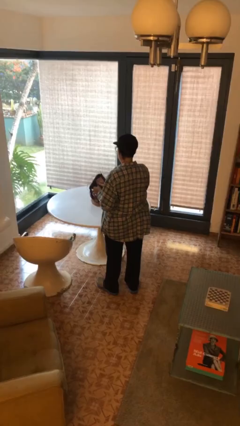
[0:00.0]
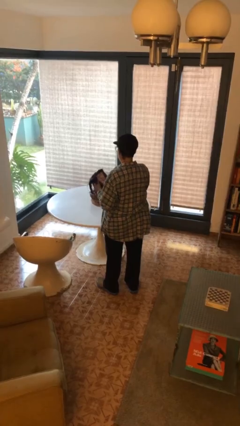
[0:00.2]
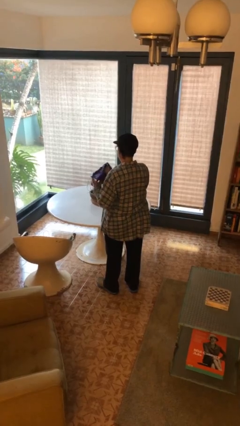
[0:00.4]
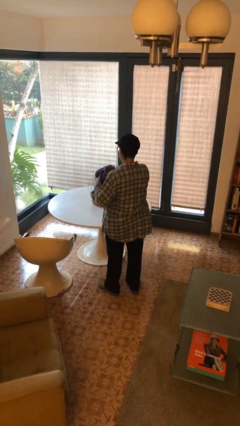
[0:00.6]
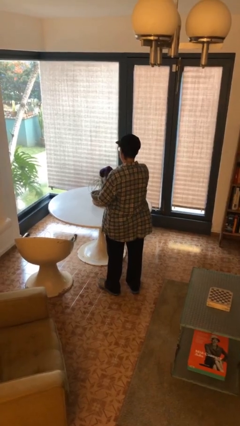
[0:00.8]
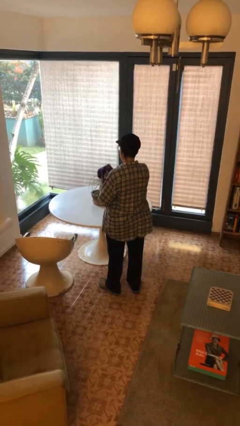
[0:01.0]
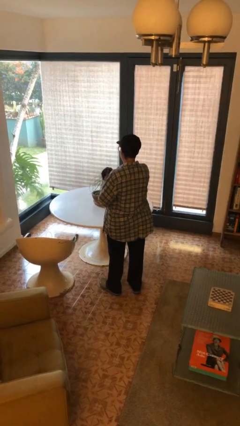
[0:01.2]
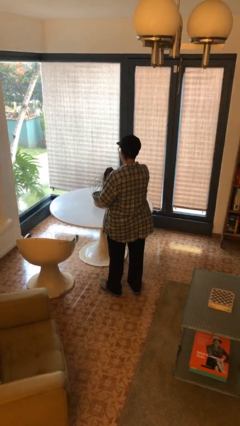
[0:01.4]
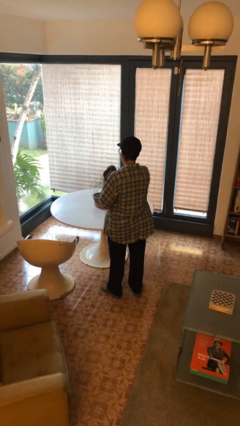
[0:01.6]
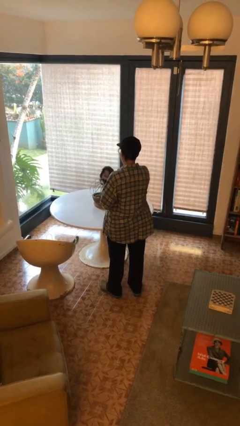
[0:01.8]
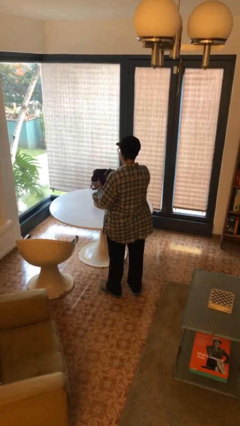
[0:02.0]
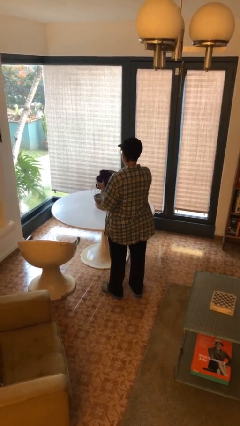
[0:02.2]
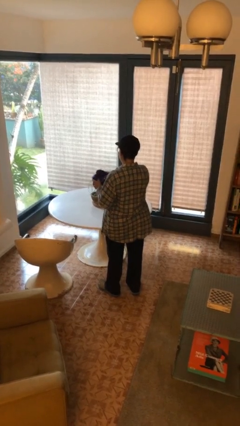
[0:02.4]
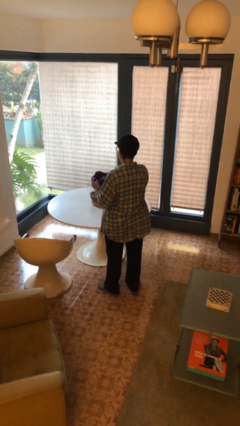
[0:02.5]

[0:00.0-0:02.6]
person squeezes object

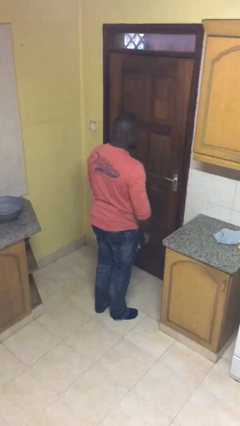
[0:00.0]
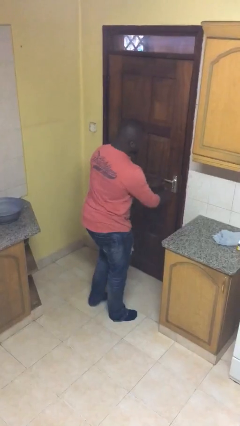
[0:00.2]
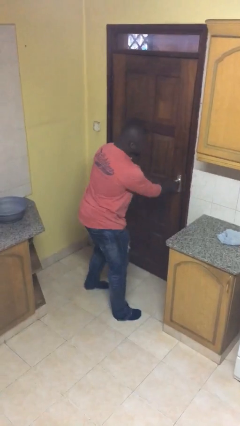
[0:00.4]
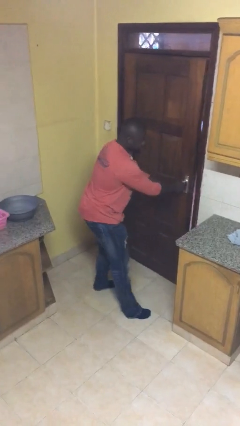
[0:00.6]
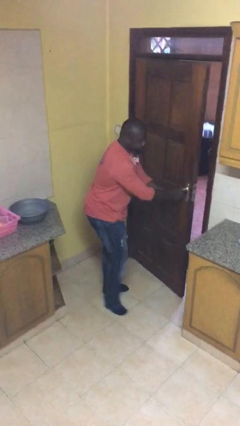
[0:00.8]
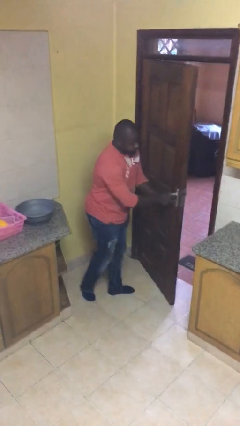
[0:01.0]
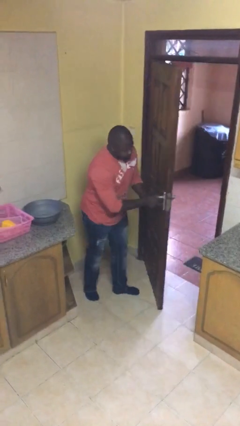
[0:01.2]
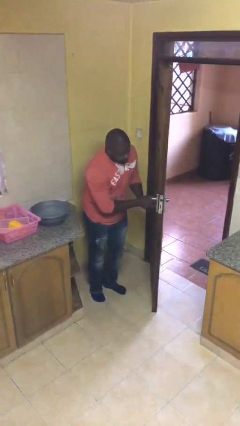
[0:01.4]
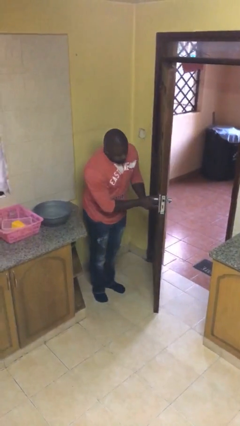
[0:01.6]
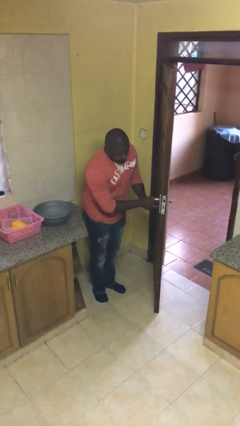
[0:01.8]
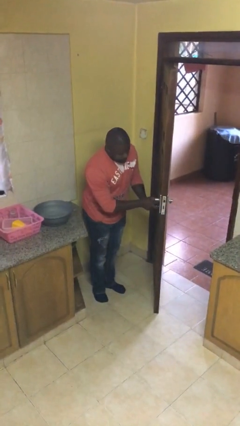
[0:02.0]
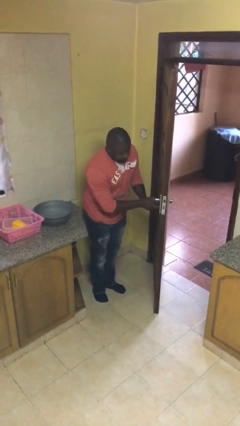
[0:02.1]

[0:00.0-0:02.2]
person opens facility door

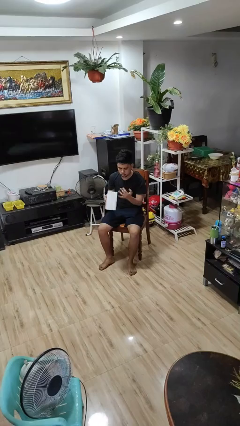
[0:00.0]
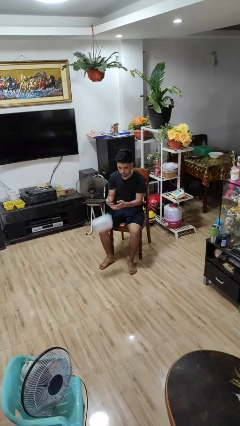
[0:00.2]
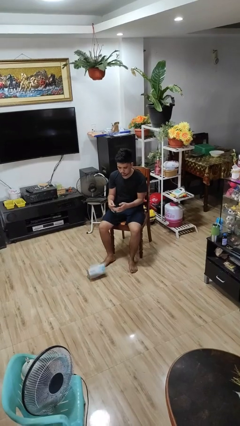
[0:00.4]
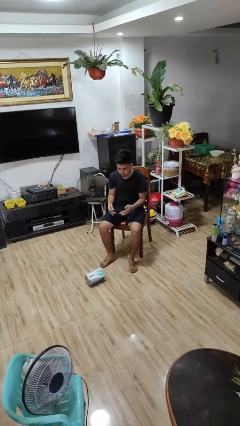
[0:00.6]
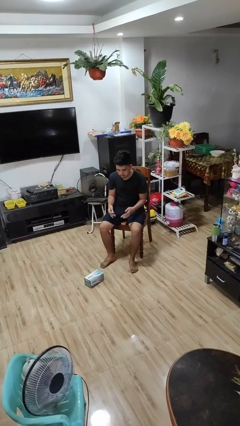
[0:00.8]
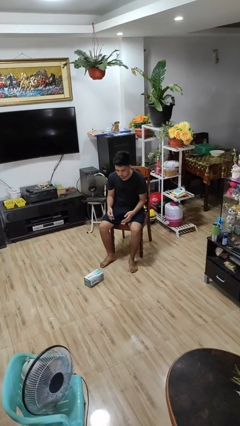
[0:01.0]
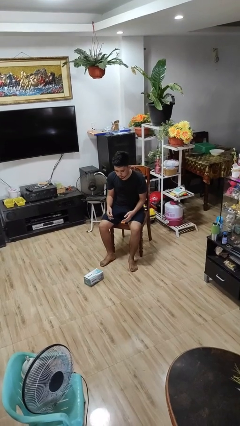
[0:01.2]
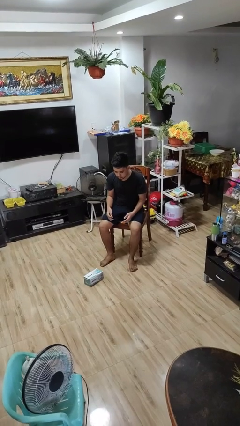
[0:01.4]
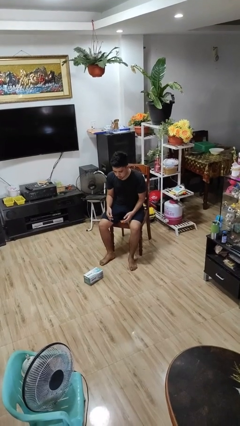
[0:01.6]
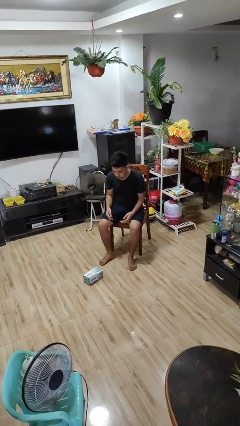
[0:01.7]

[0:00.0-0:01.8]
person drops object

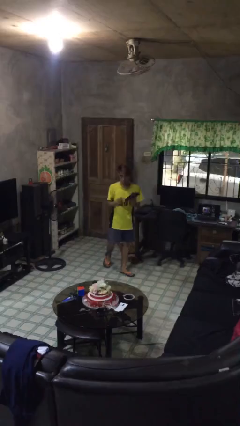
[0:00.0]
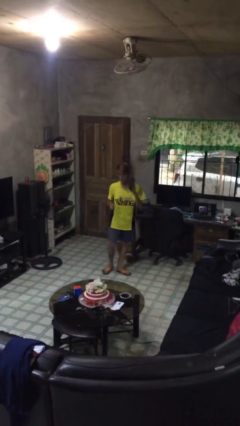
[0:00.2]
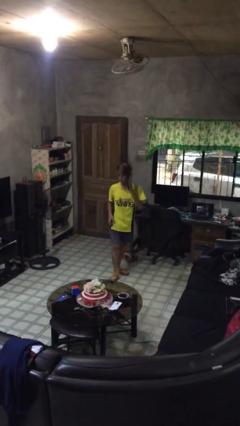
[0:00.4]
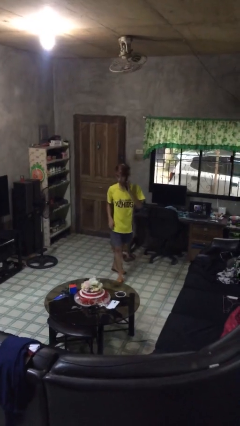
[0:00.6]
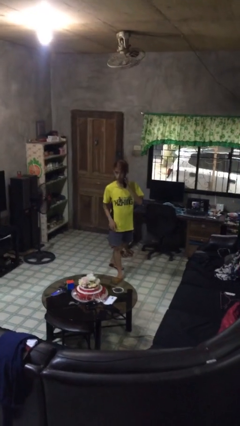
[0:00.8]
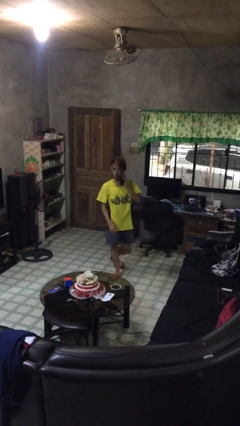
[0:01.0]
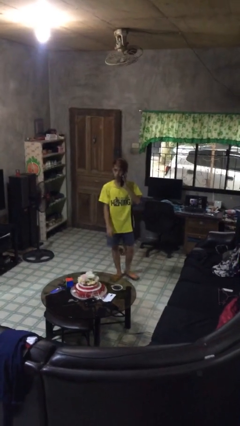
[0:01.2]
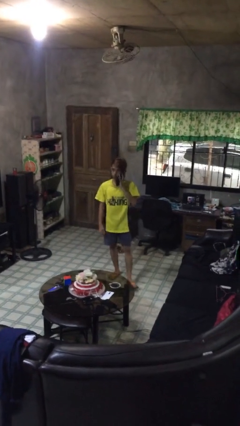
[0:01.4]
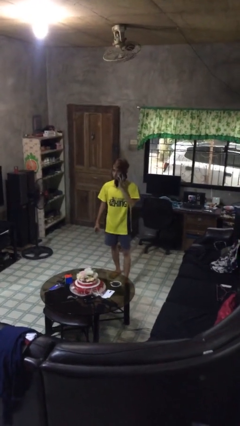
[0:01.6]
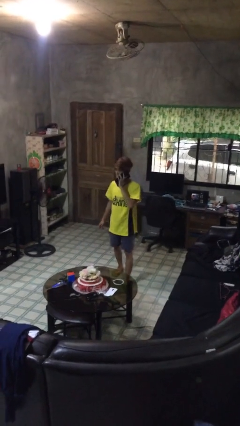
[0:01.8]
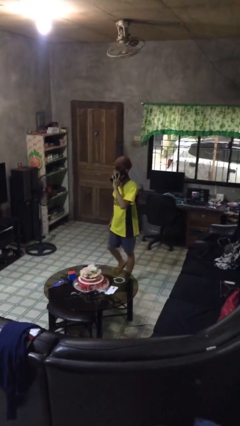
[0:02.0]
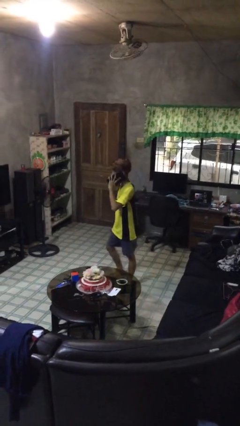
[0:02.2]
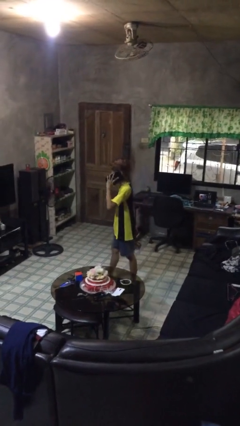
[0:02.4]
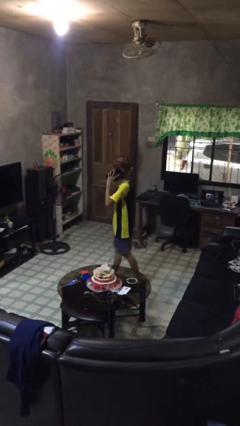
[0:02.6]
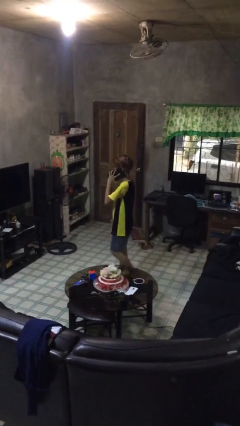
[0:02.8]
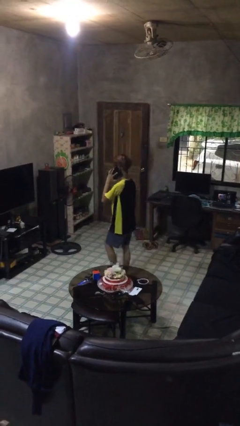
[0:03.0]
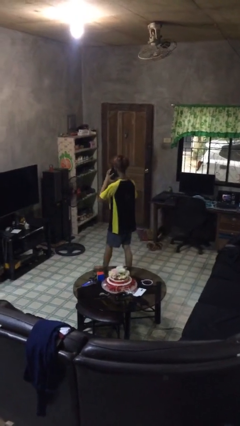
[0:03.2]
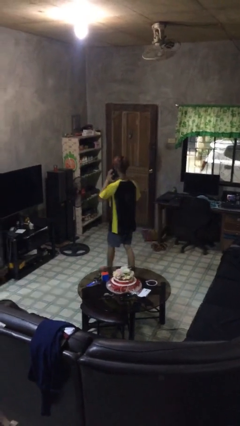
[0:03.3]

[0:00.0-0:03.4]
person talks on phone

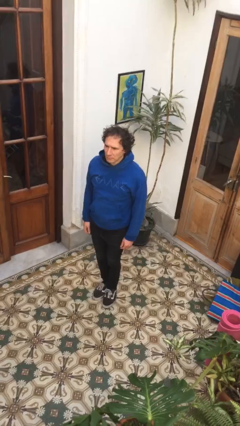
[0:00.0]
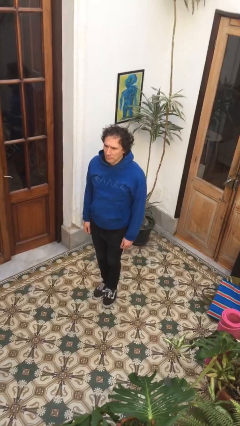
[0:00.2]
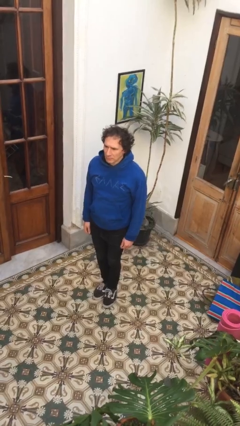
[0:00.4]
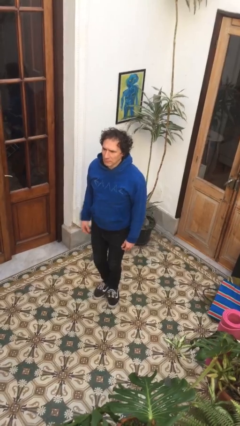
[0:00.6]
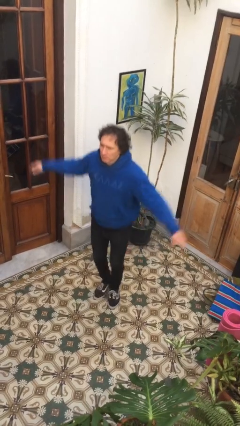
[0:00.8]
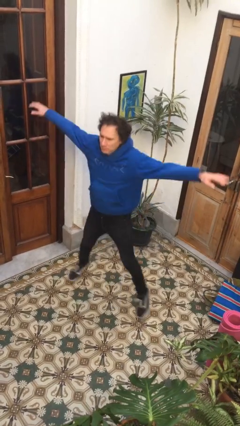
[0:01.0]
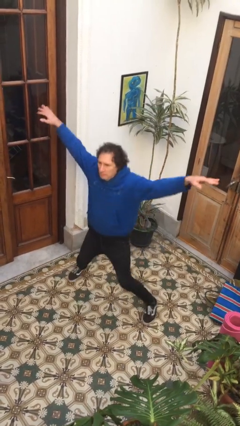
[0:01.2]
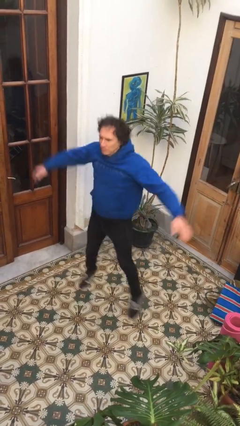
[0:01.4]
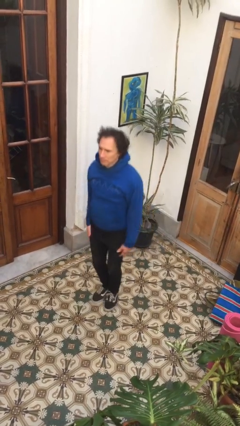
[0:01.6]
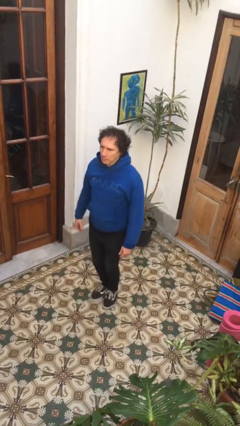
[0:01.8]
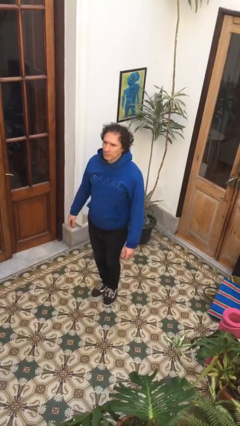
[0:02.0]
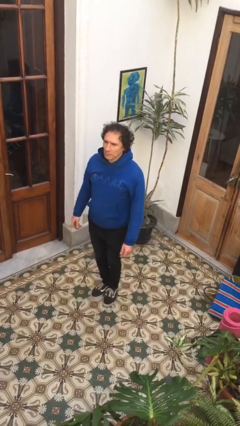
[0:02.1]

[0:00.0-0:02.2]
person exercises with jumping jacks

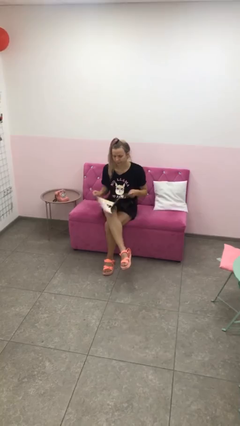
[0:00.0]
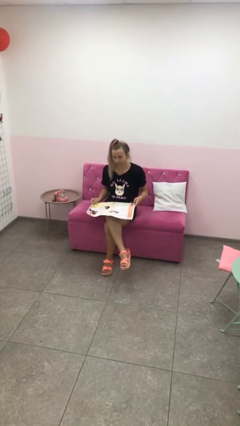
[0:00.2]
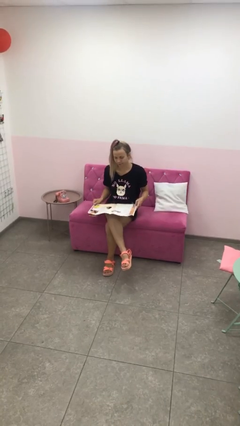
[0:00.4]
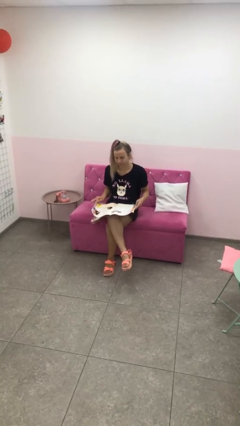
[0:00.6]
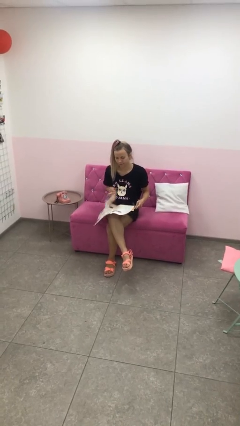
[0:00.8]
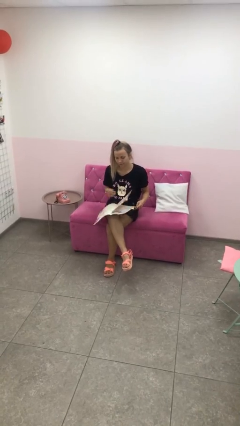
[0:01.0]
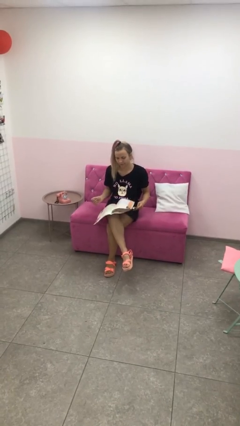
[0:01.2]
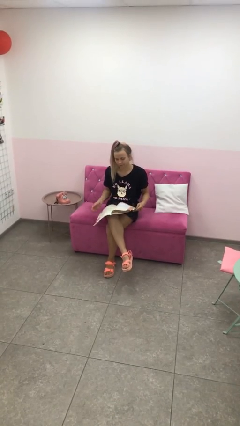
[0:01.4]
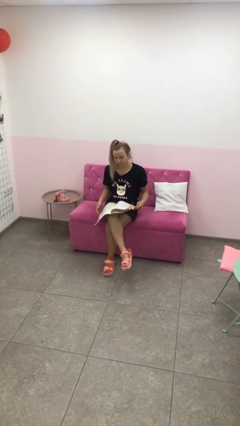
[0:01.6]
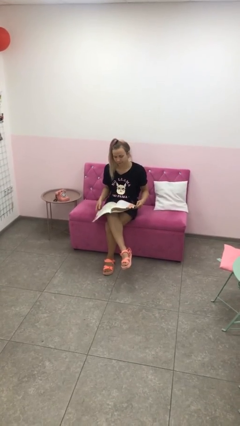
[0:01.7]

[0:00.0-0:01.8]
person reads magazine

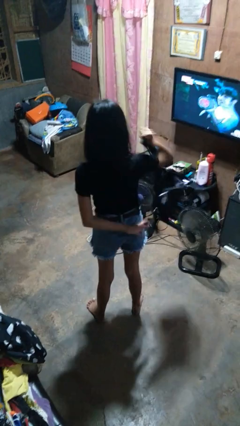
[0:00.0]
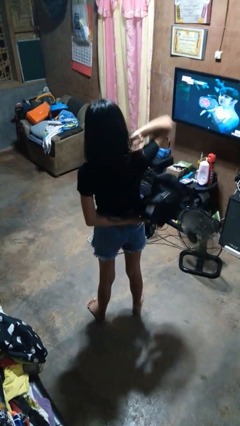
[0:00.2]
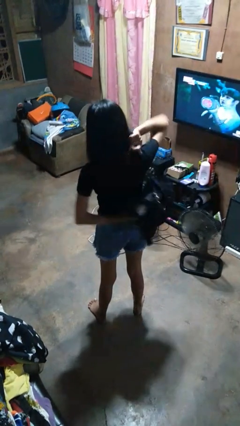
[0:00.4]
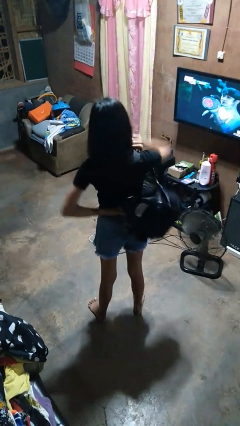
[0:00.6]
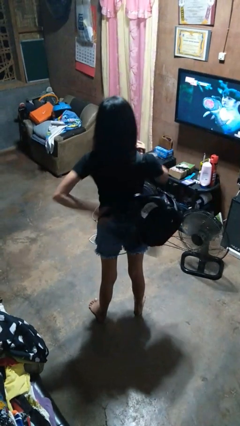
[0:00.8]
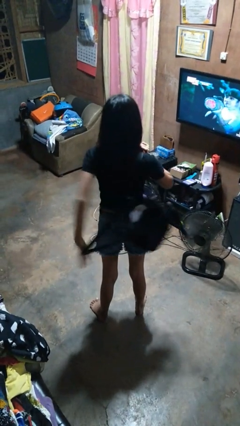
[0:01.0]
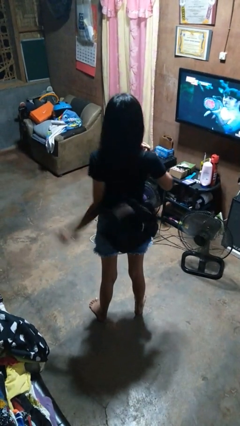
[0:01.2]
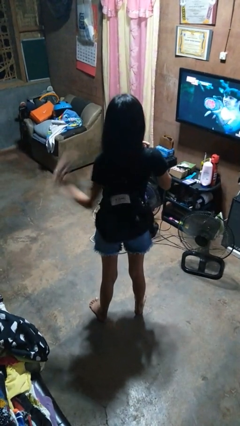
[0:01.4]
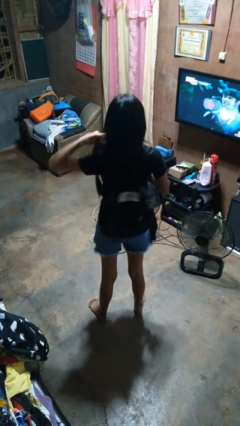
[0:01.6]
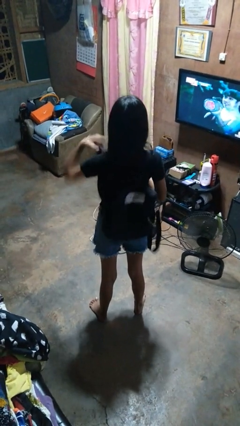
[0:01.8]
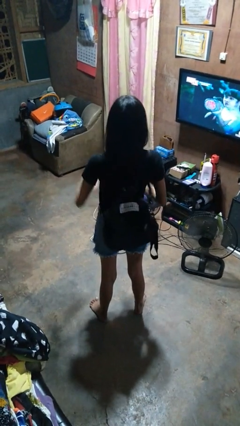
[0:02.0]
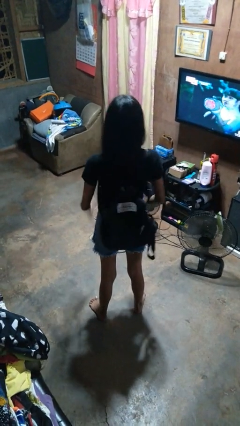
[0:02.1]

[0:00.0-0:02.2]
person puts on backpack

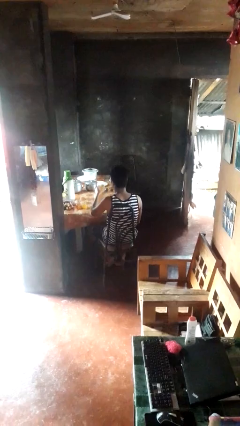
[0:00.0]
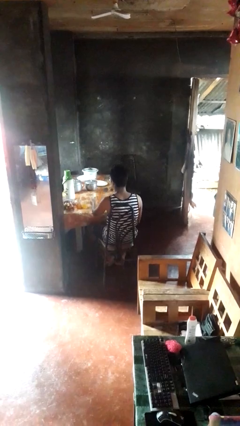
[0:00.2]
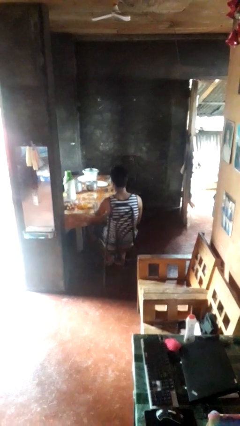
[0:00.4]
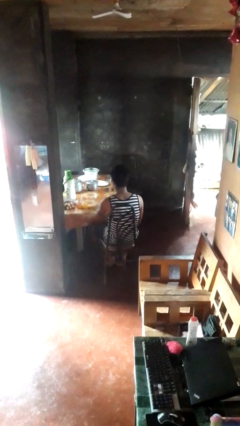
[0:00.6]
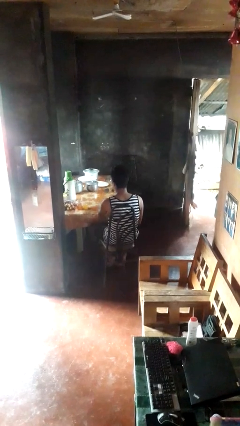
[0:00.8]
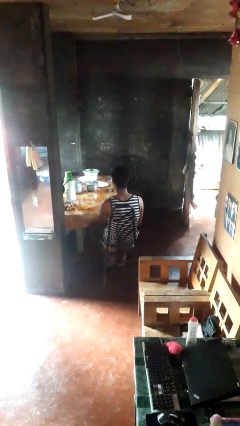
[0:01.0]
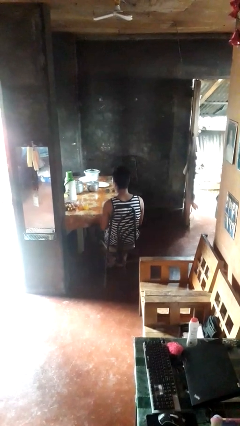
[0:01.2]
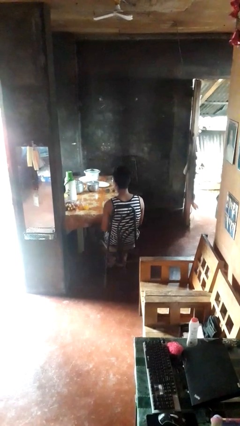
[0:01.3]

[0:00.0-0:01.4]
person puts down object on table
